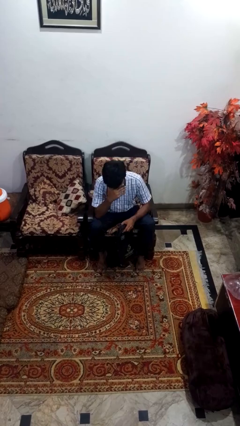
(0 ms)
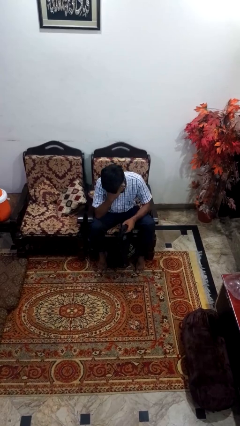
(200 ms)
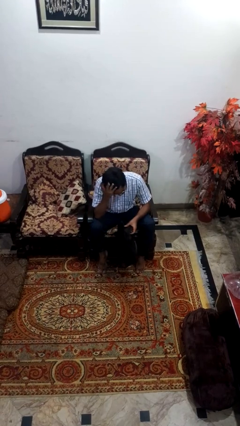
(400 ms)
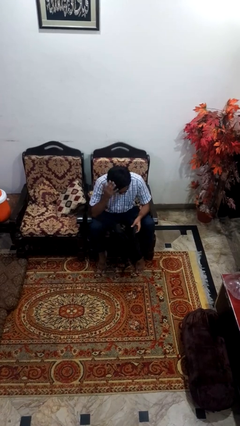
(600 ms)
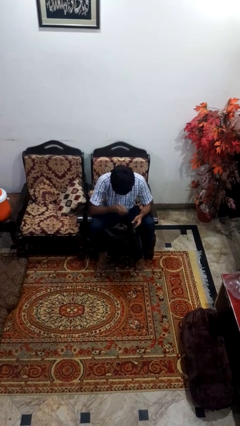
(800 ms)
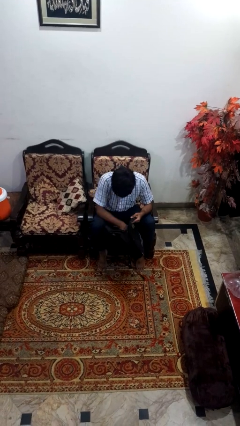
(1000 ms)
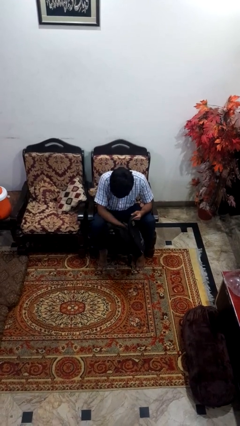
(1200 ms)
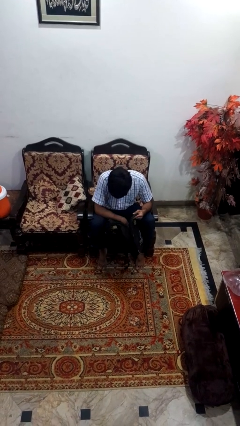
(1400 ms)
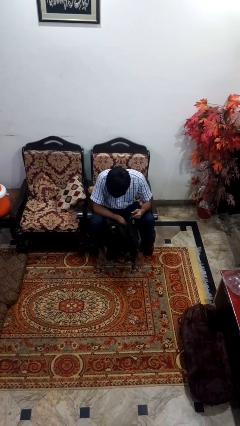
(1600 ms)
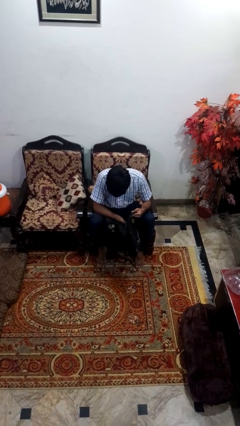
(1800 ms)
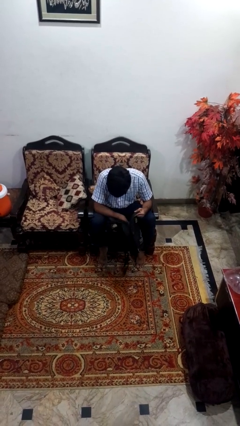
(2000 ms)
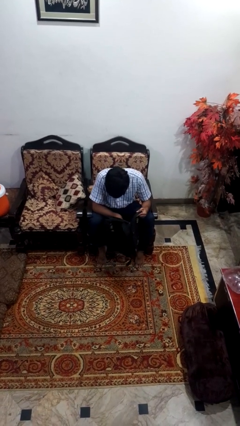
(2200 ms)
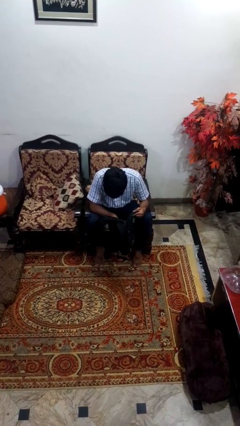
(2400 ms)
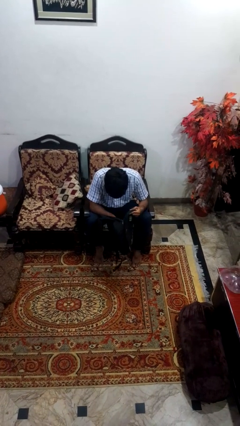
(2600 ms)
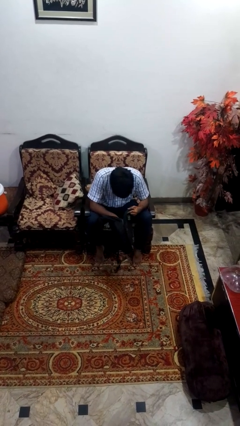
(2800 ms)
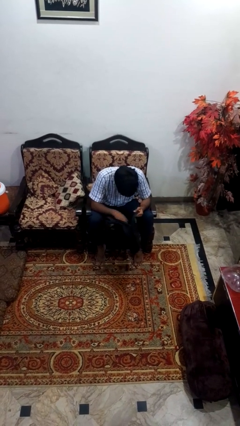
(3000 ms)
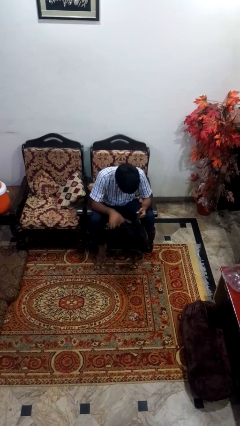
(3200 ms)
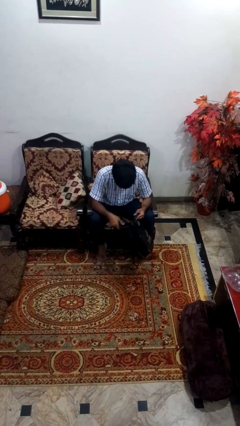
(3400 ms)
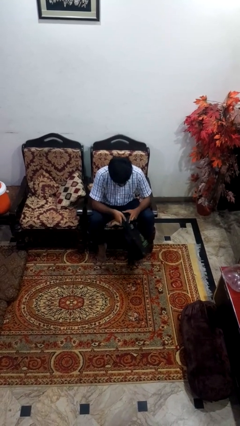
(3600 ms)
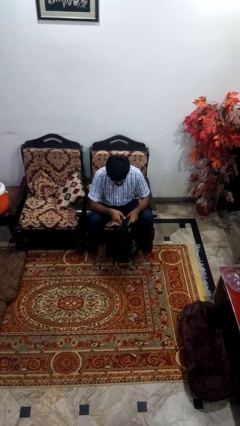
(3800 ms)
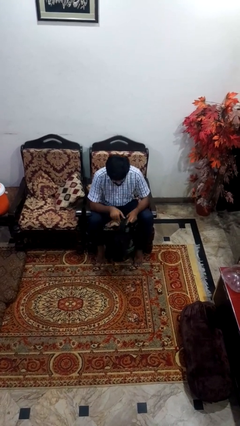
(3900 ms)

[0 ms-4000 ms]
person searches in bag

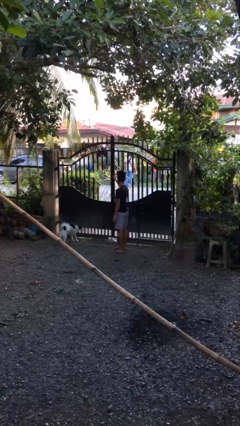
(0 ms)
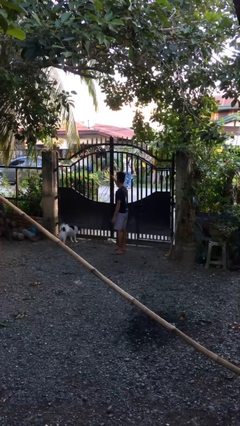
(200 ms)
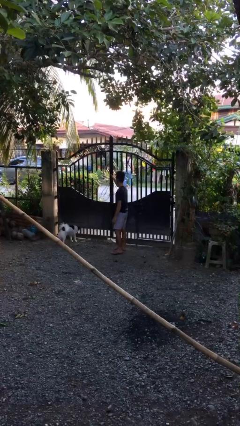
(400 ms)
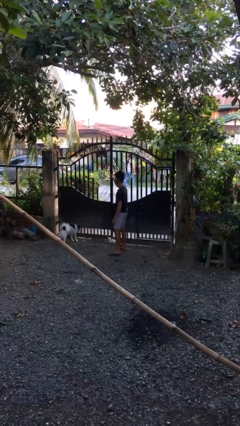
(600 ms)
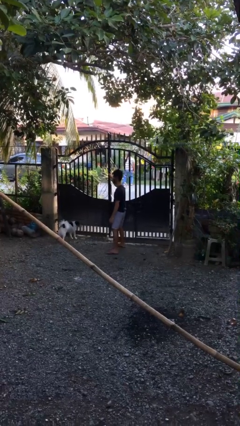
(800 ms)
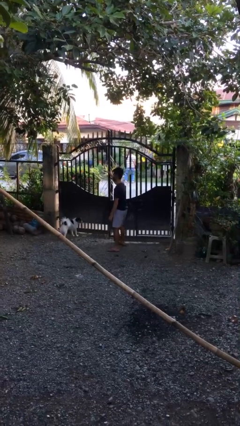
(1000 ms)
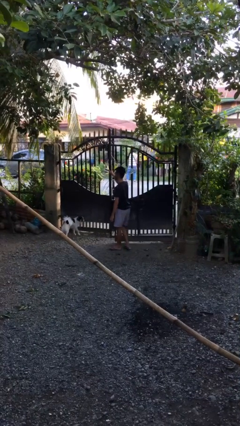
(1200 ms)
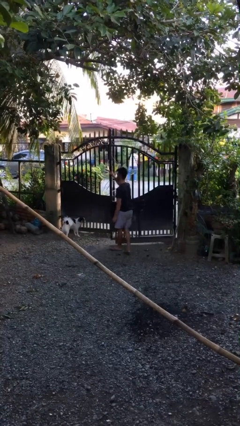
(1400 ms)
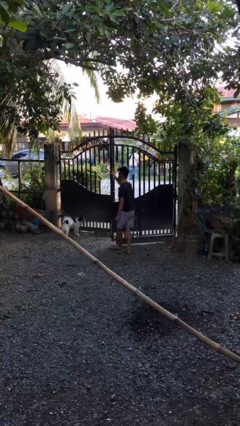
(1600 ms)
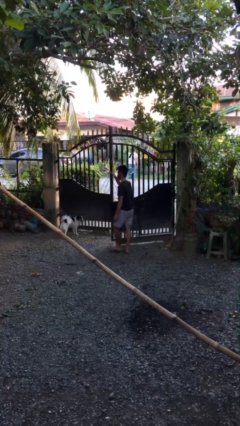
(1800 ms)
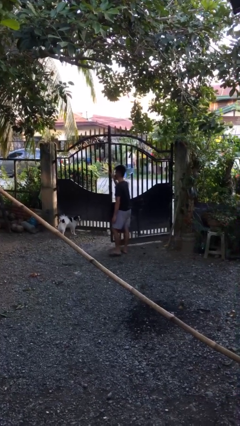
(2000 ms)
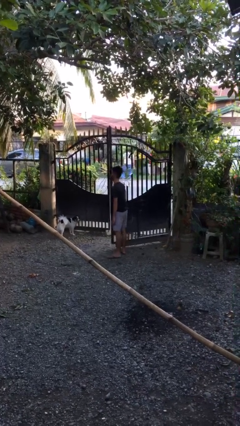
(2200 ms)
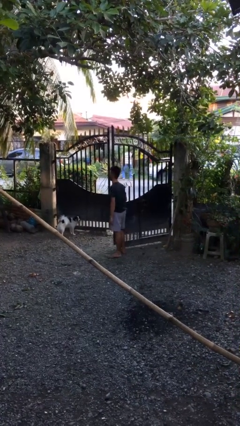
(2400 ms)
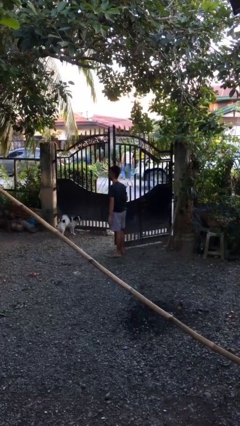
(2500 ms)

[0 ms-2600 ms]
person opens gate

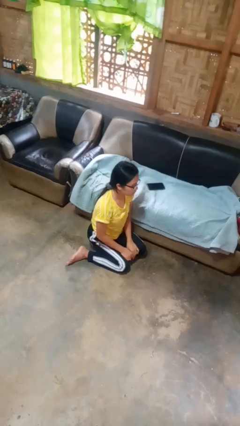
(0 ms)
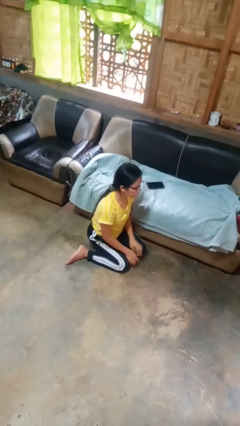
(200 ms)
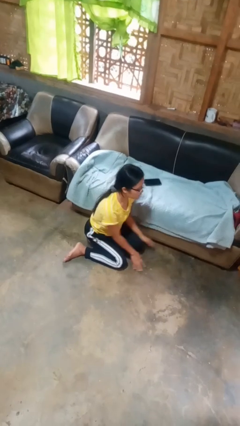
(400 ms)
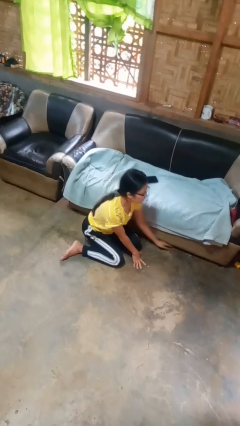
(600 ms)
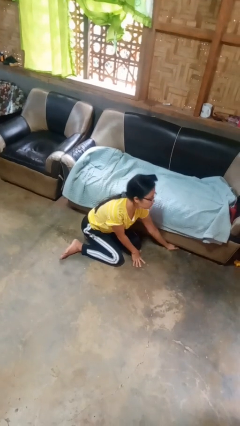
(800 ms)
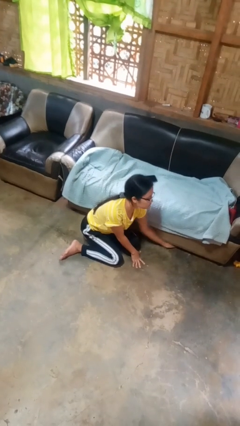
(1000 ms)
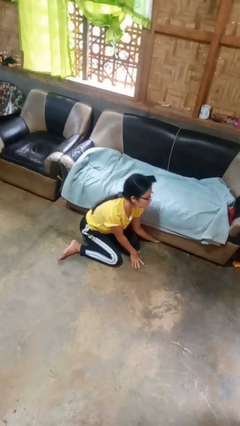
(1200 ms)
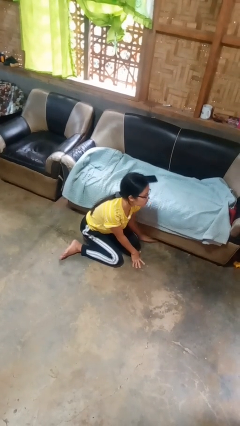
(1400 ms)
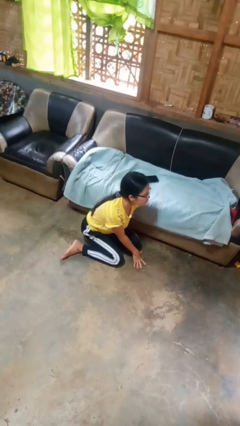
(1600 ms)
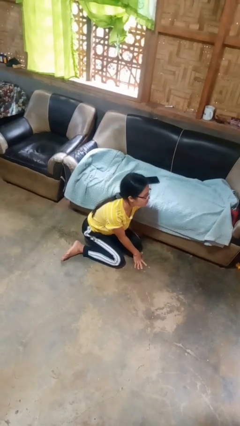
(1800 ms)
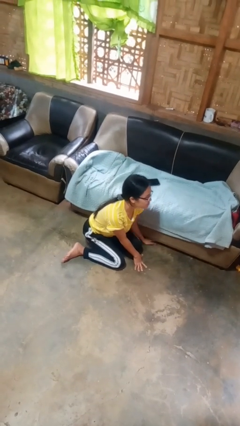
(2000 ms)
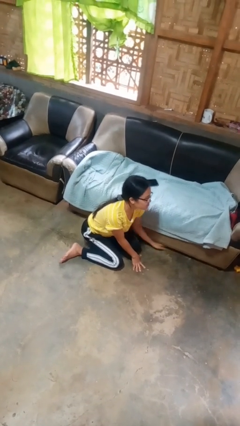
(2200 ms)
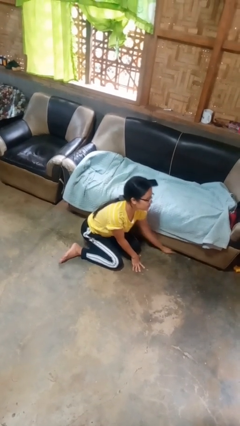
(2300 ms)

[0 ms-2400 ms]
person searches under couch

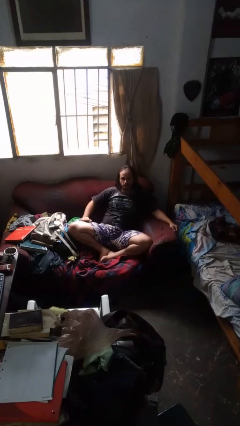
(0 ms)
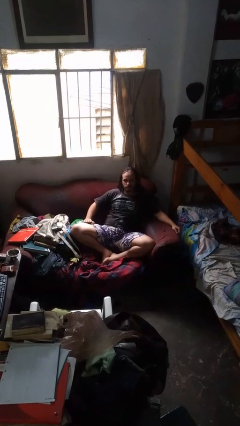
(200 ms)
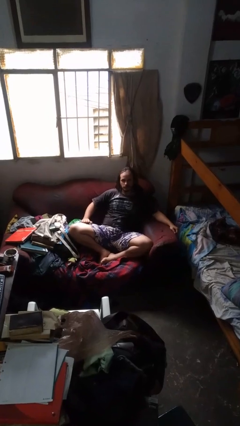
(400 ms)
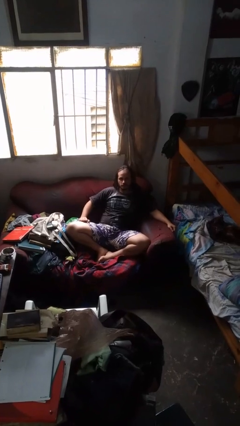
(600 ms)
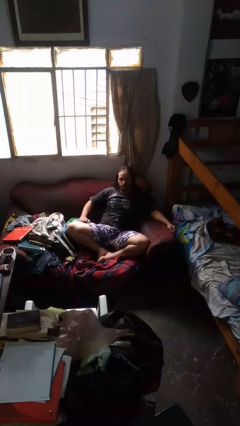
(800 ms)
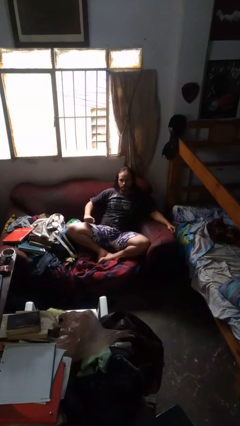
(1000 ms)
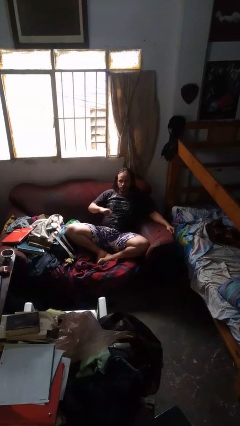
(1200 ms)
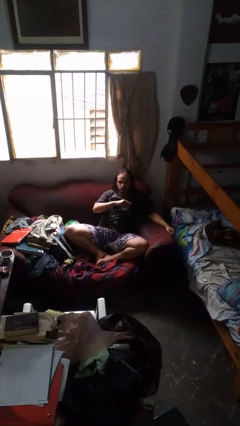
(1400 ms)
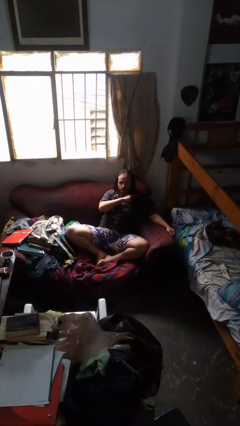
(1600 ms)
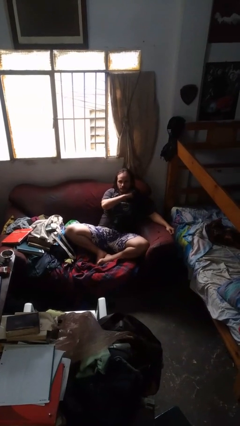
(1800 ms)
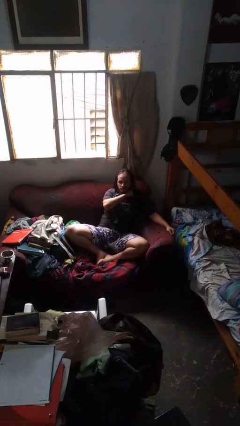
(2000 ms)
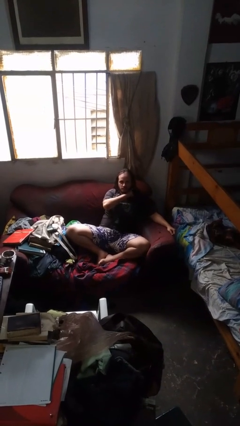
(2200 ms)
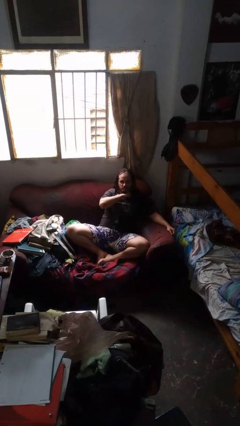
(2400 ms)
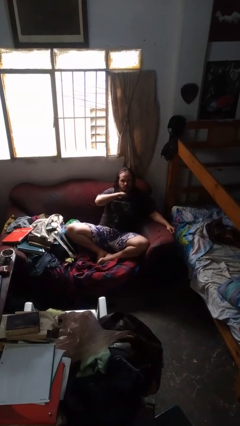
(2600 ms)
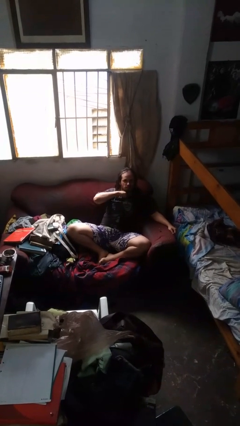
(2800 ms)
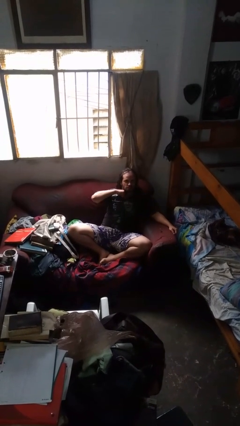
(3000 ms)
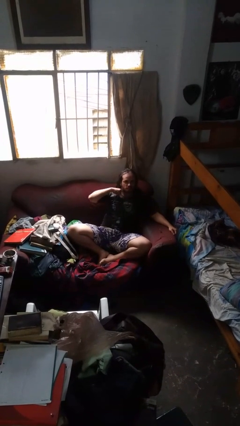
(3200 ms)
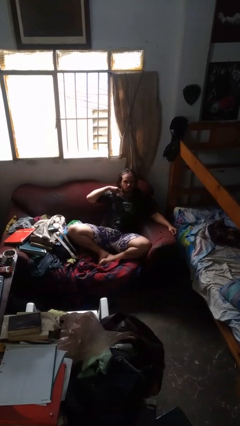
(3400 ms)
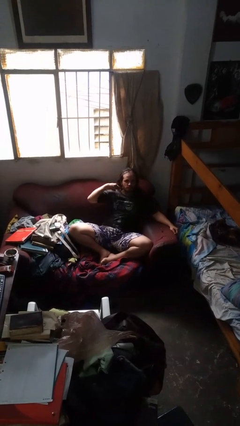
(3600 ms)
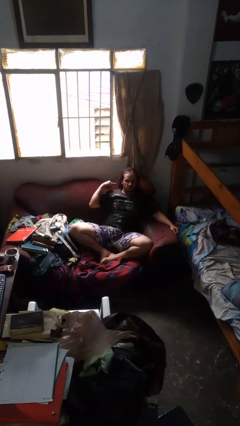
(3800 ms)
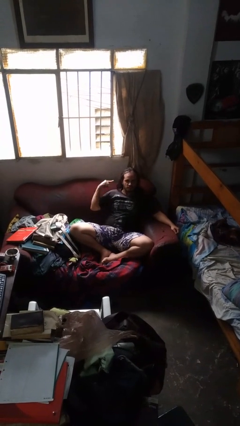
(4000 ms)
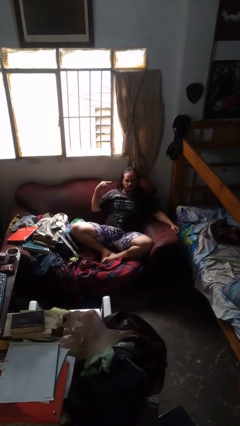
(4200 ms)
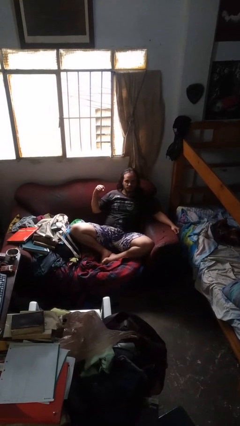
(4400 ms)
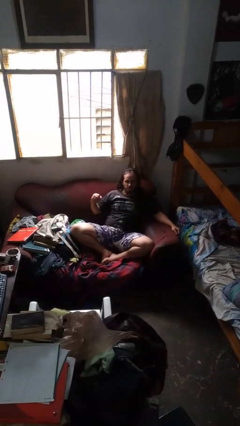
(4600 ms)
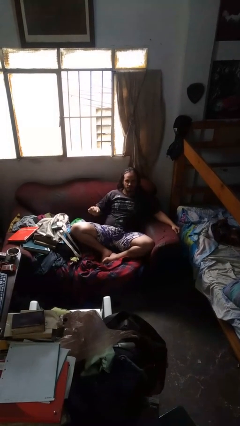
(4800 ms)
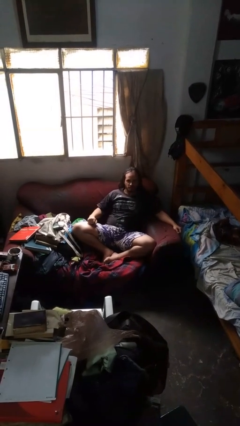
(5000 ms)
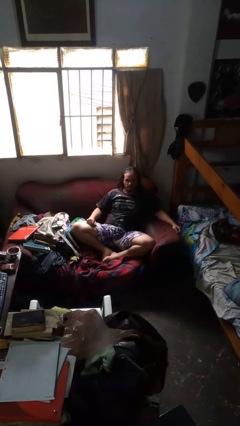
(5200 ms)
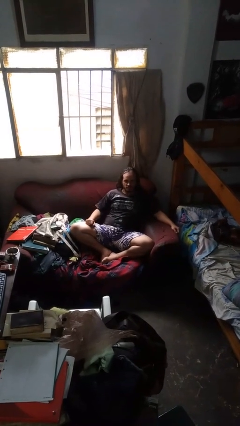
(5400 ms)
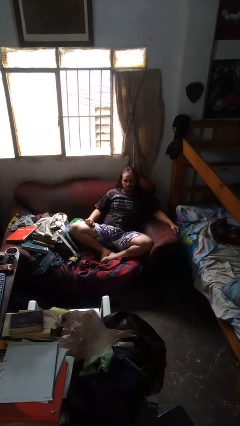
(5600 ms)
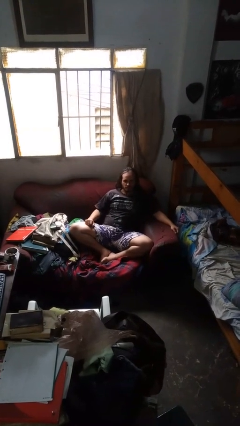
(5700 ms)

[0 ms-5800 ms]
person gestures cut

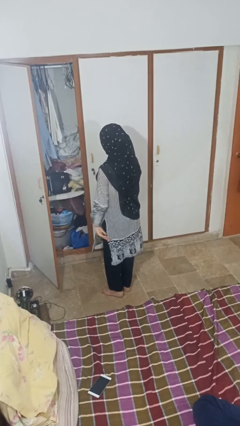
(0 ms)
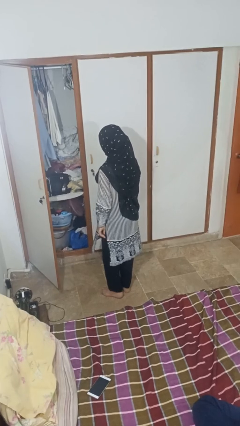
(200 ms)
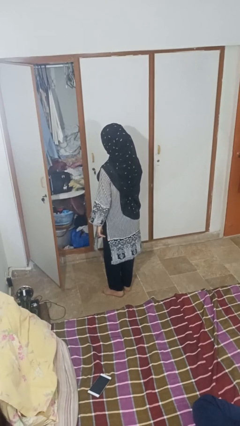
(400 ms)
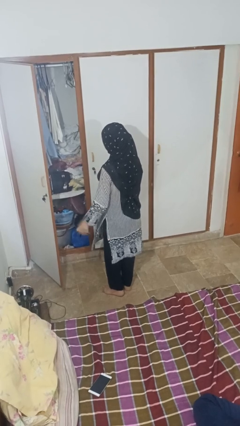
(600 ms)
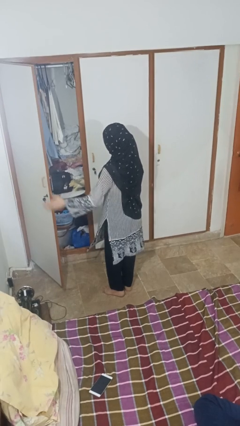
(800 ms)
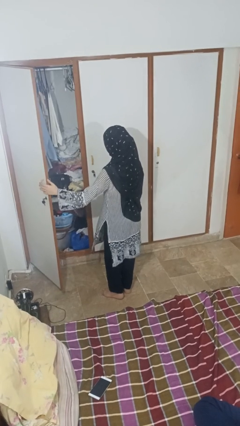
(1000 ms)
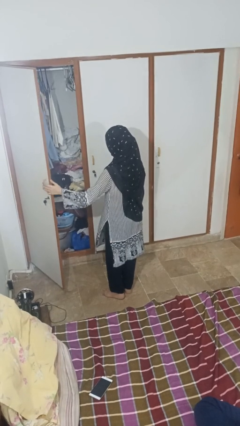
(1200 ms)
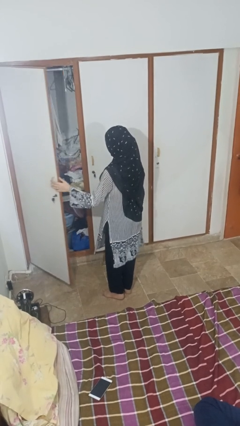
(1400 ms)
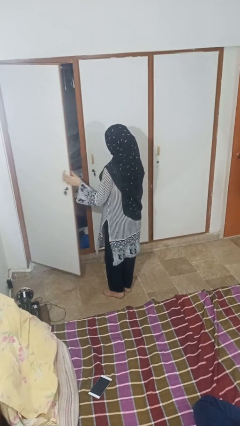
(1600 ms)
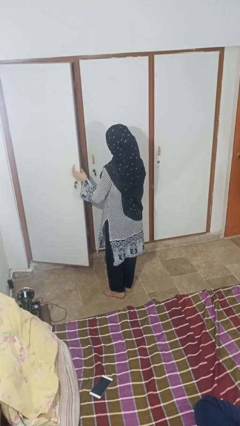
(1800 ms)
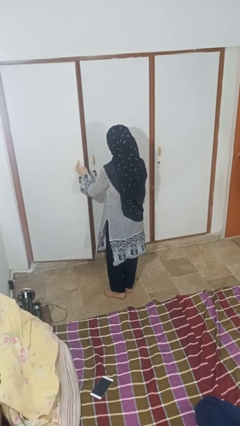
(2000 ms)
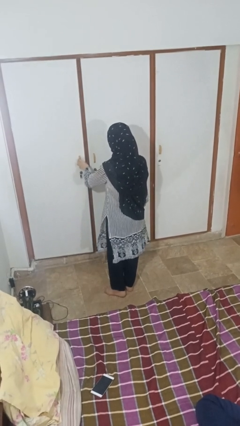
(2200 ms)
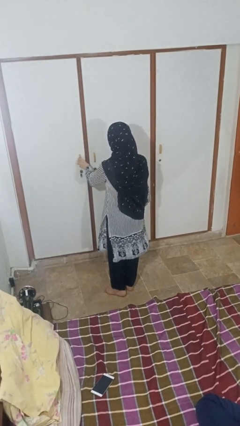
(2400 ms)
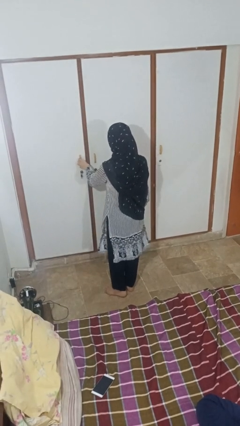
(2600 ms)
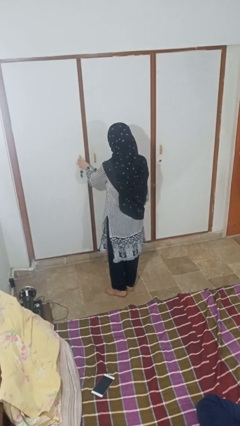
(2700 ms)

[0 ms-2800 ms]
person closes closet door

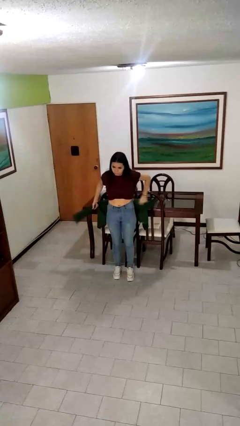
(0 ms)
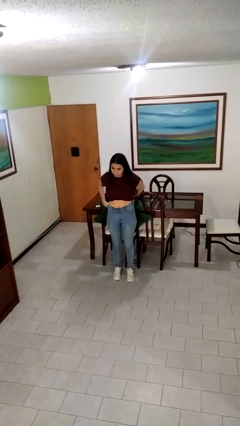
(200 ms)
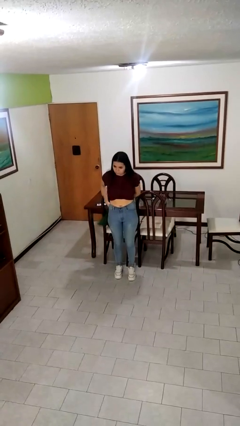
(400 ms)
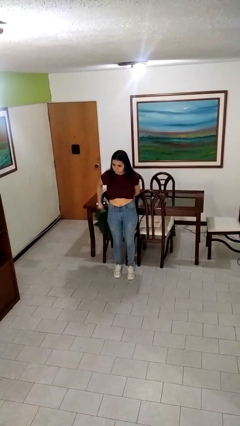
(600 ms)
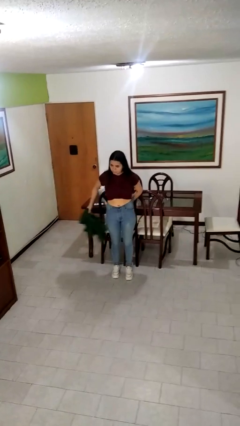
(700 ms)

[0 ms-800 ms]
person unties jacket around waist
